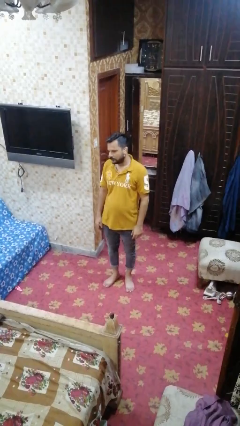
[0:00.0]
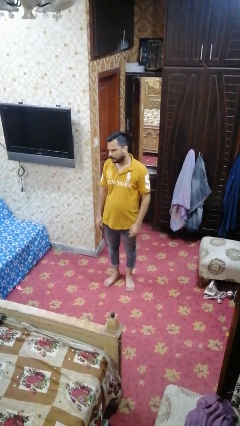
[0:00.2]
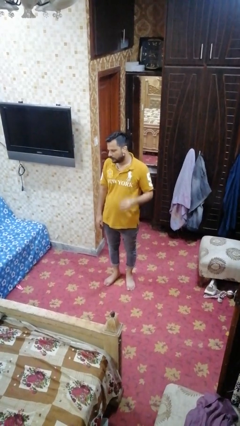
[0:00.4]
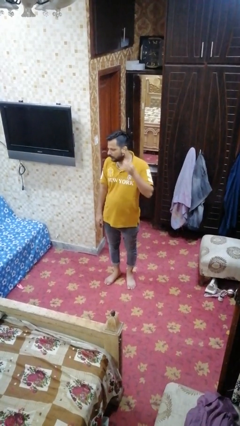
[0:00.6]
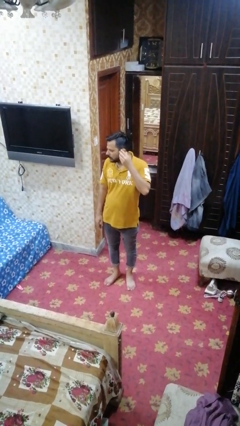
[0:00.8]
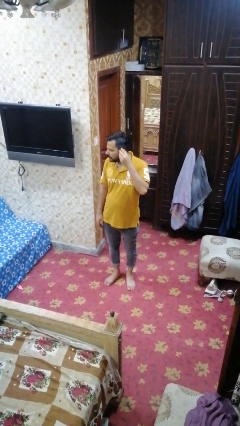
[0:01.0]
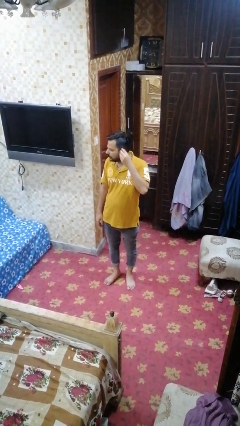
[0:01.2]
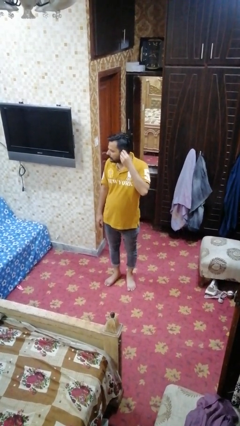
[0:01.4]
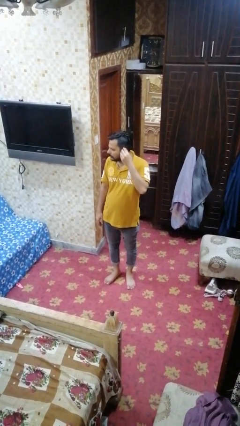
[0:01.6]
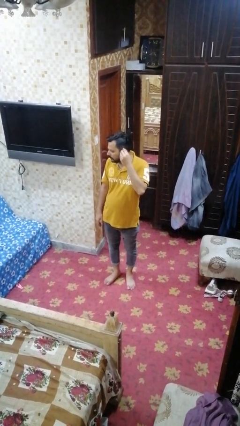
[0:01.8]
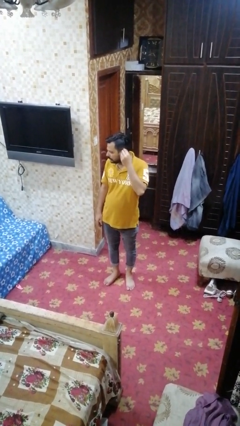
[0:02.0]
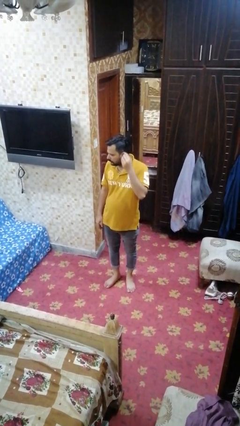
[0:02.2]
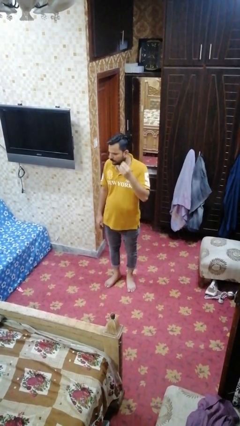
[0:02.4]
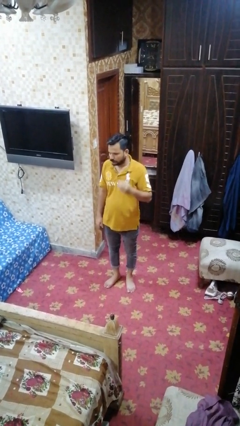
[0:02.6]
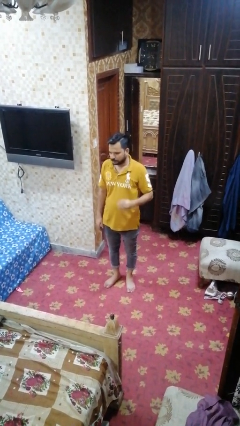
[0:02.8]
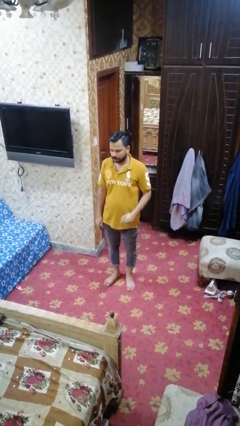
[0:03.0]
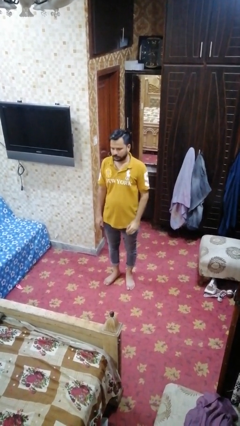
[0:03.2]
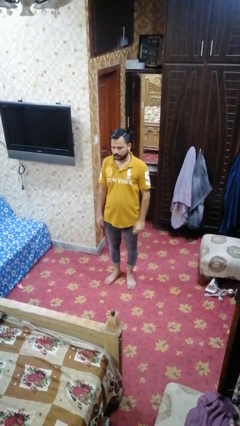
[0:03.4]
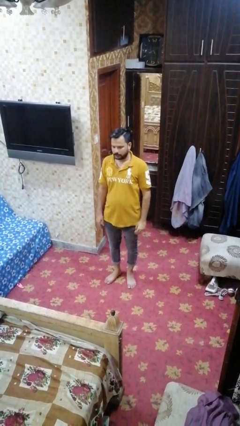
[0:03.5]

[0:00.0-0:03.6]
person takes off earrings

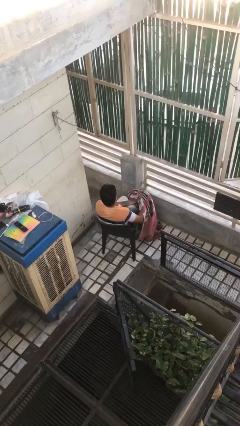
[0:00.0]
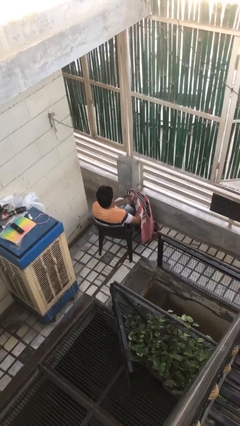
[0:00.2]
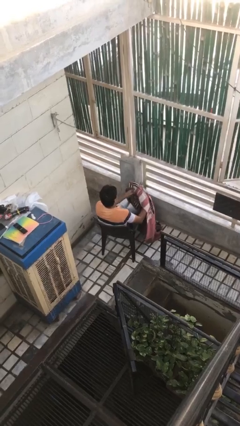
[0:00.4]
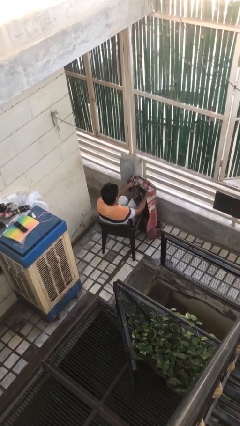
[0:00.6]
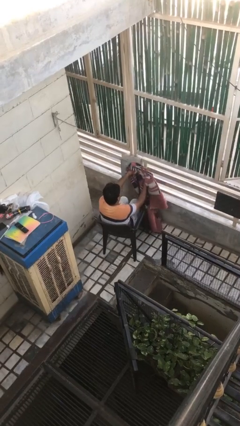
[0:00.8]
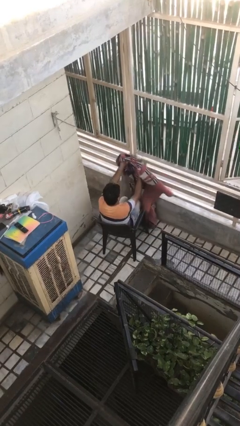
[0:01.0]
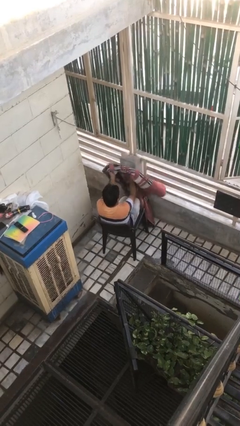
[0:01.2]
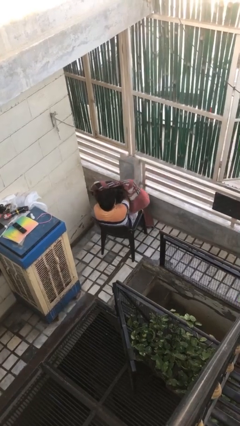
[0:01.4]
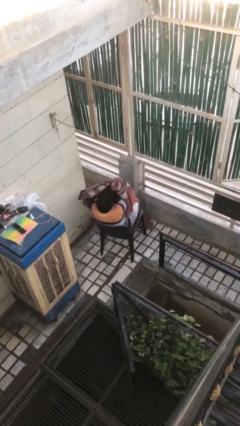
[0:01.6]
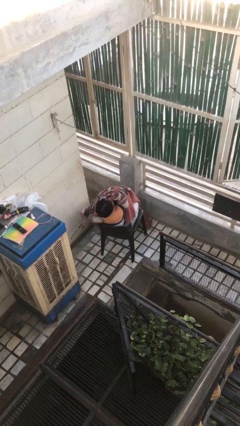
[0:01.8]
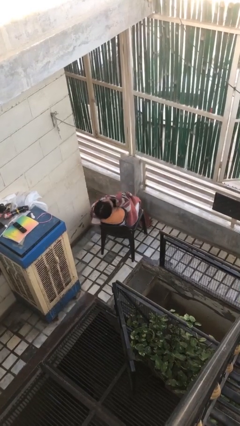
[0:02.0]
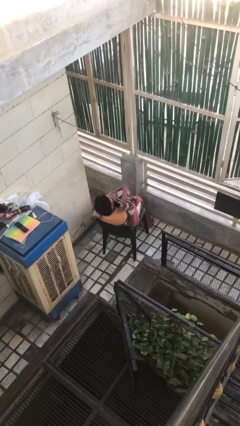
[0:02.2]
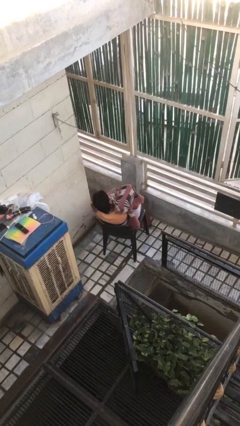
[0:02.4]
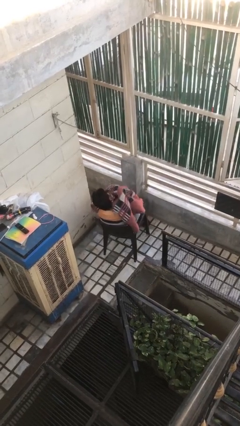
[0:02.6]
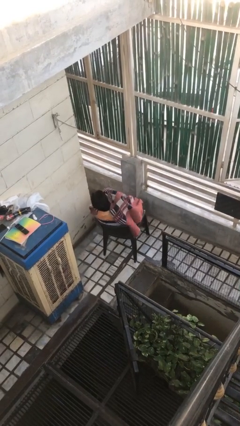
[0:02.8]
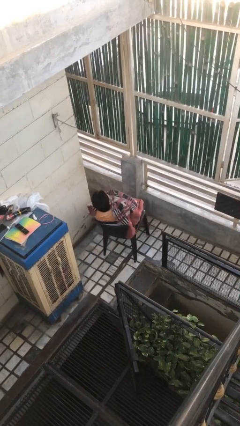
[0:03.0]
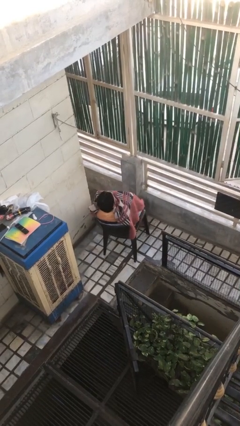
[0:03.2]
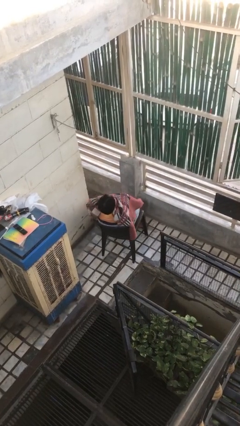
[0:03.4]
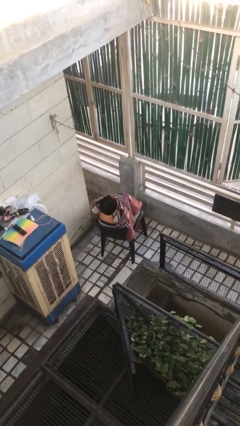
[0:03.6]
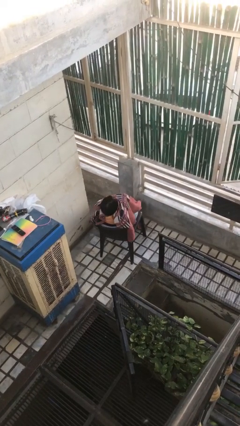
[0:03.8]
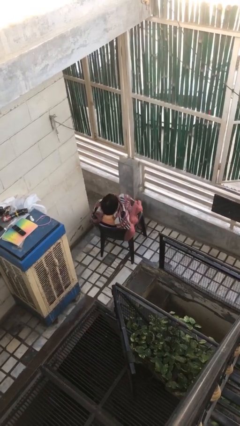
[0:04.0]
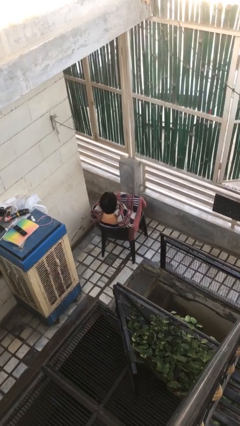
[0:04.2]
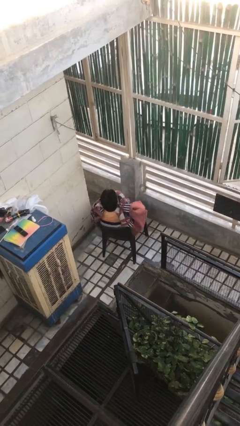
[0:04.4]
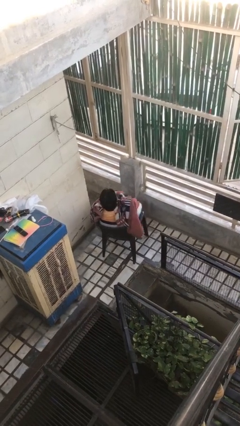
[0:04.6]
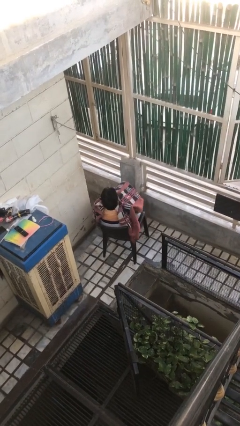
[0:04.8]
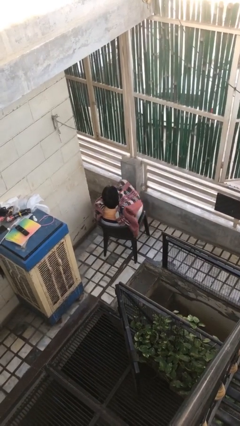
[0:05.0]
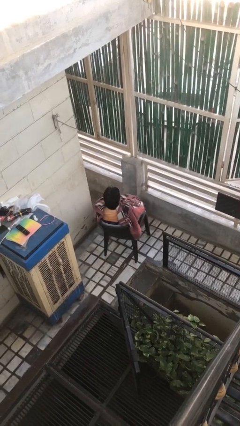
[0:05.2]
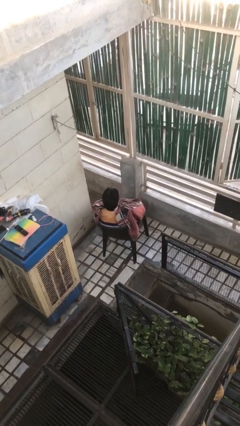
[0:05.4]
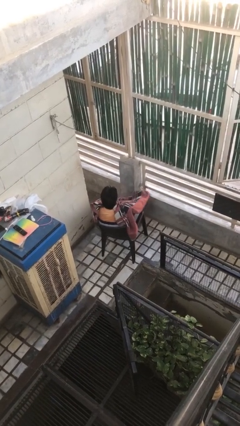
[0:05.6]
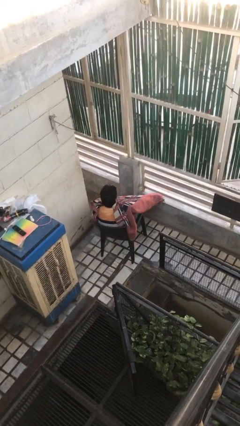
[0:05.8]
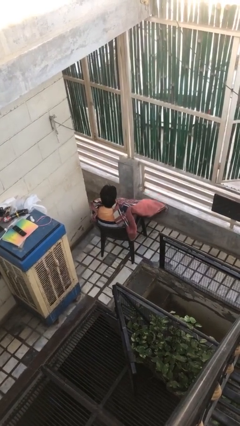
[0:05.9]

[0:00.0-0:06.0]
person covers with blanket

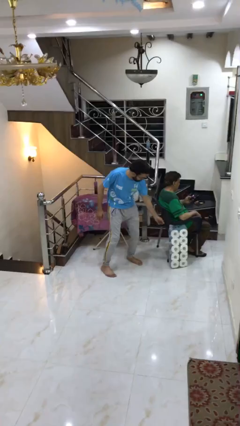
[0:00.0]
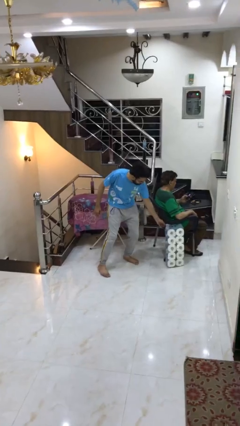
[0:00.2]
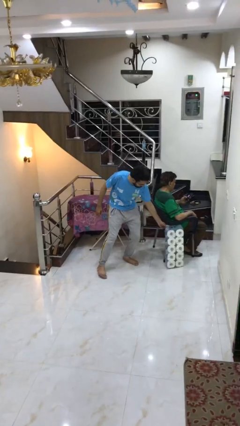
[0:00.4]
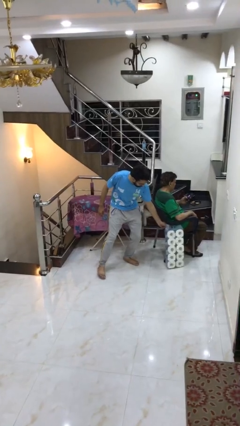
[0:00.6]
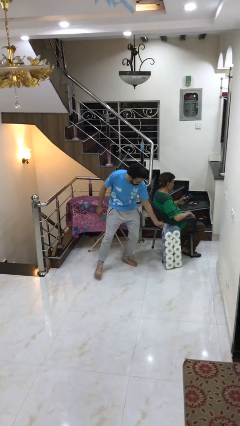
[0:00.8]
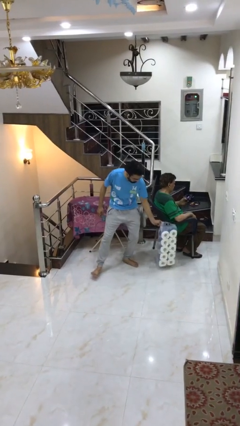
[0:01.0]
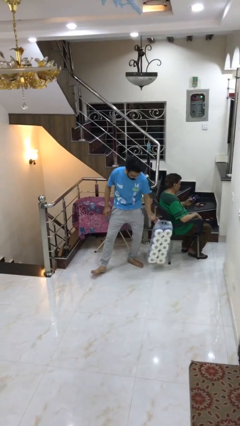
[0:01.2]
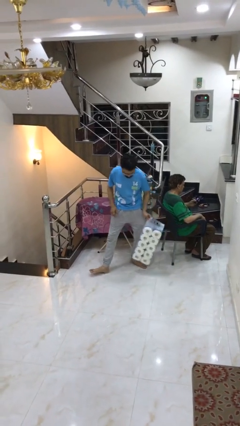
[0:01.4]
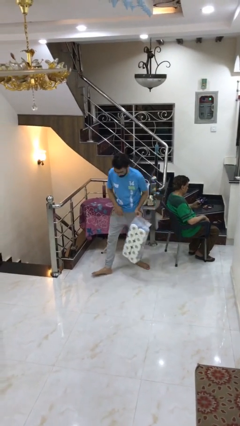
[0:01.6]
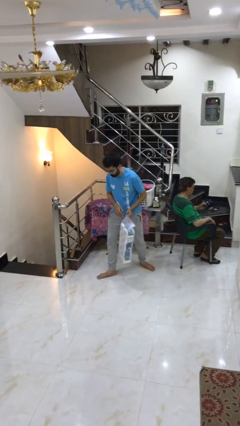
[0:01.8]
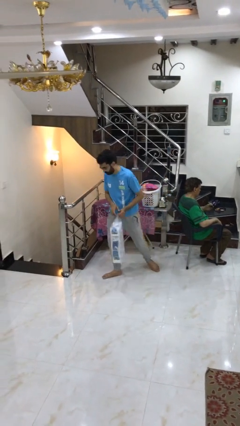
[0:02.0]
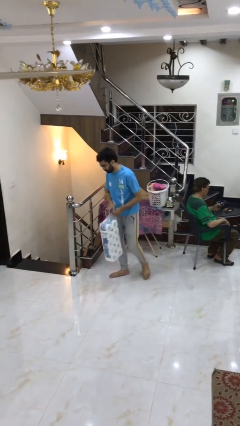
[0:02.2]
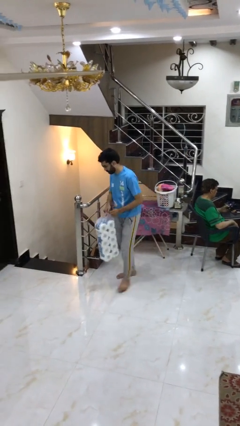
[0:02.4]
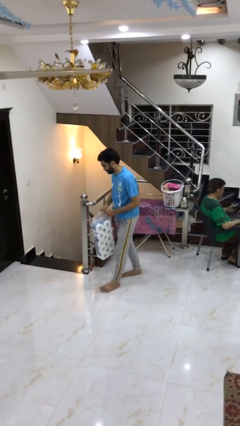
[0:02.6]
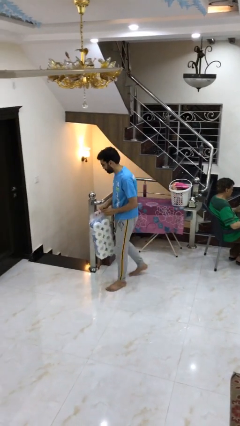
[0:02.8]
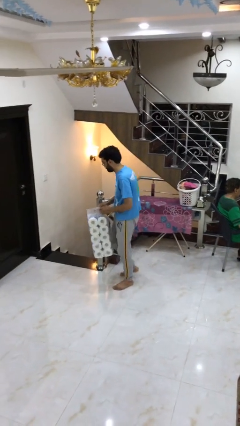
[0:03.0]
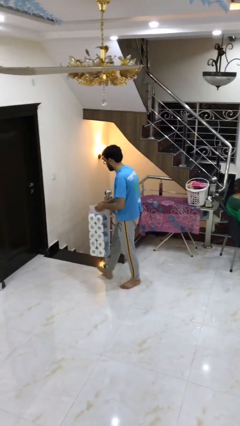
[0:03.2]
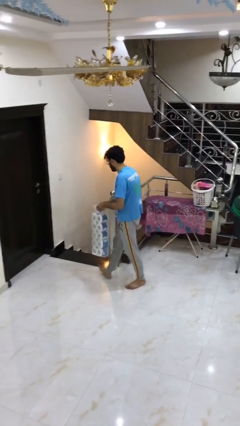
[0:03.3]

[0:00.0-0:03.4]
person steals object from person

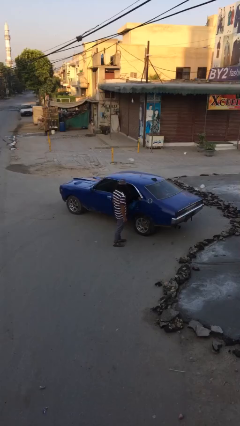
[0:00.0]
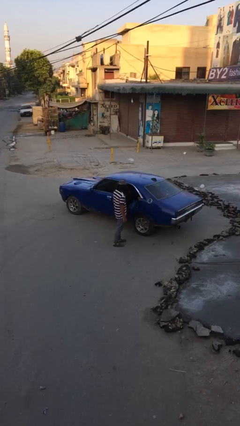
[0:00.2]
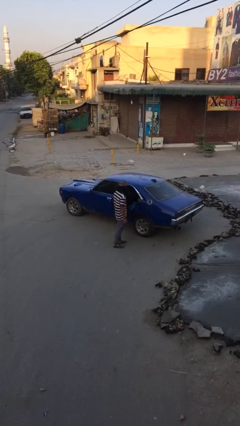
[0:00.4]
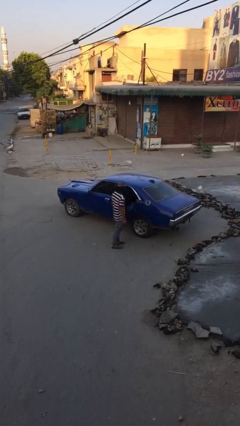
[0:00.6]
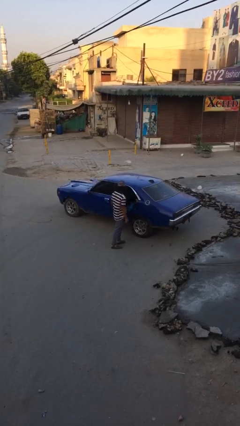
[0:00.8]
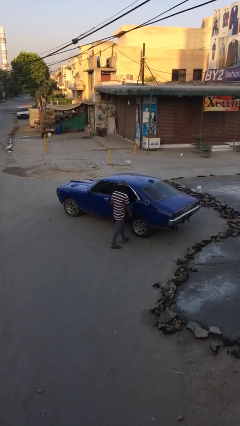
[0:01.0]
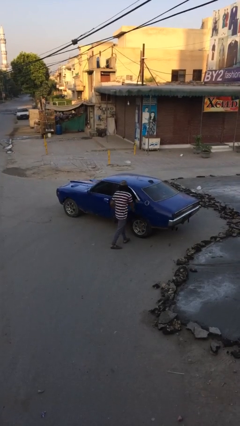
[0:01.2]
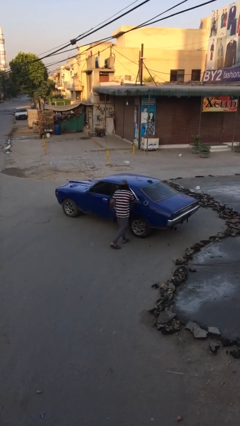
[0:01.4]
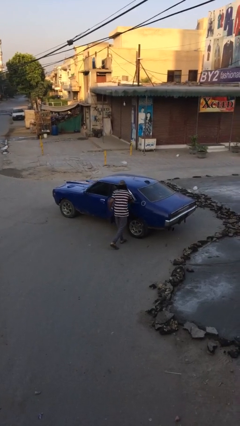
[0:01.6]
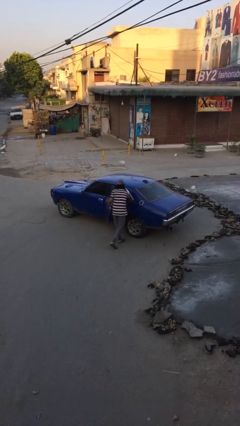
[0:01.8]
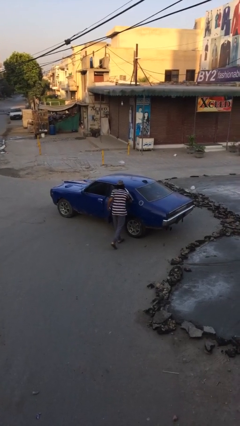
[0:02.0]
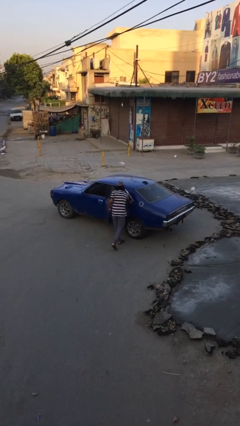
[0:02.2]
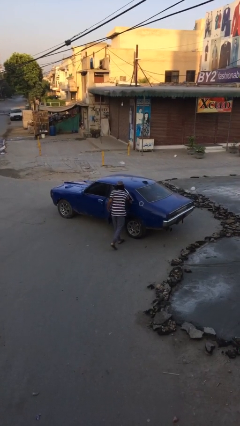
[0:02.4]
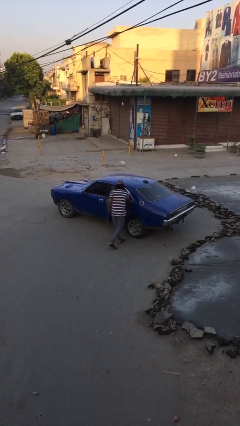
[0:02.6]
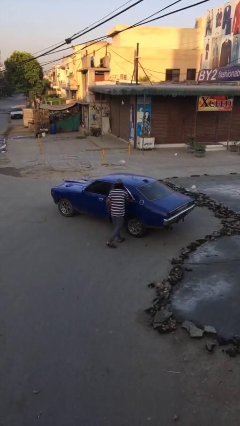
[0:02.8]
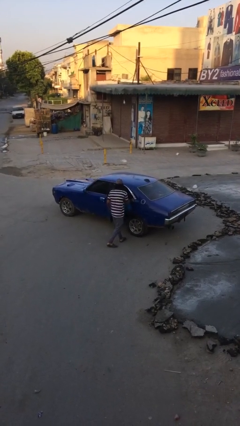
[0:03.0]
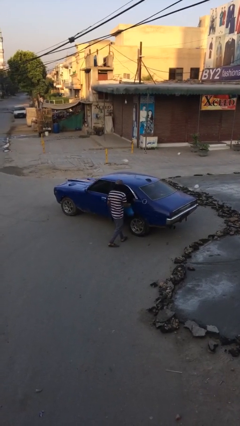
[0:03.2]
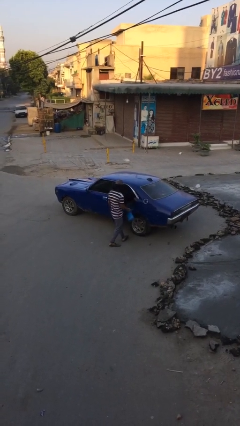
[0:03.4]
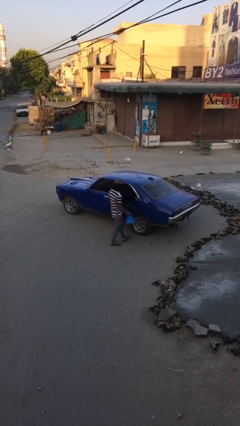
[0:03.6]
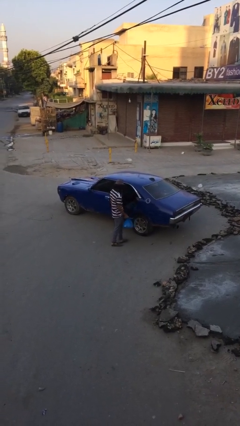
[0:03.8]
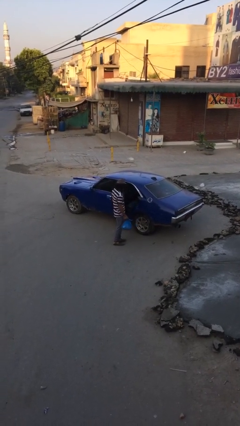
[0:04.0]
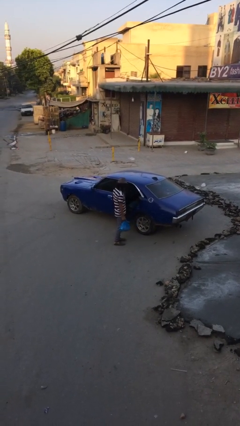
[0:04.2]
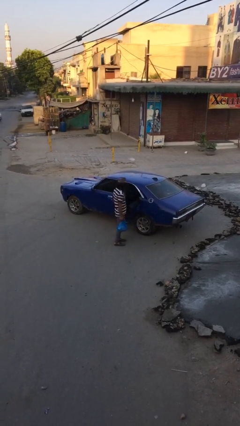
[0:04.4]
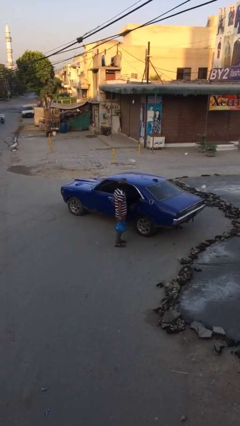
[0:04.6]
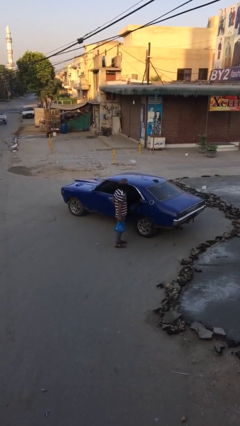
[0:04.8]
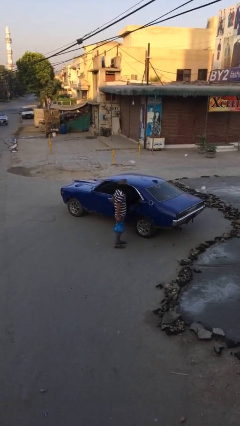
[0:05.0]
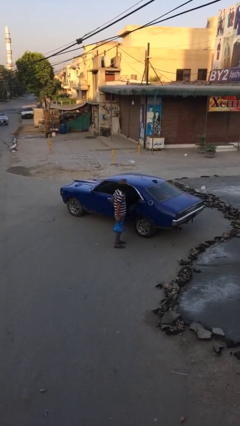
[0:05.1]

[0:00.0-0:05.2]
person unloads car

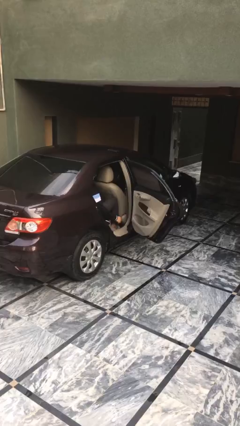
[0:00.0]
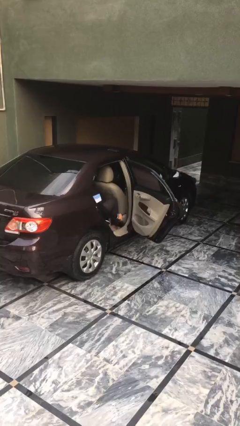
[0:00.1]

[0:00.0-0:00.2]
person closes car door
